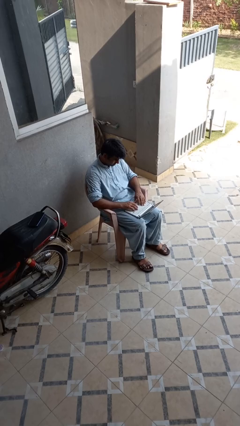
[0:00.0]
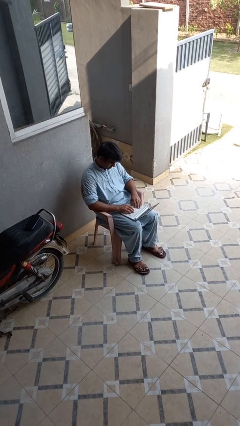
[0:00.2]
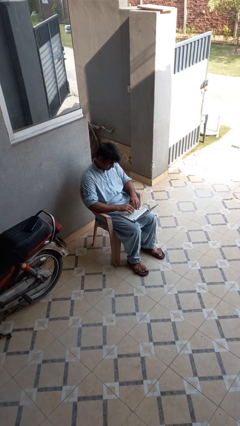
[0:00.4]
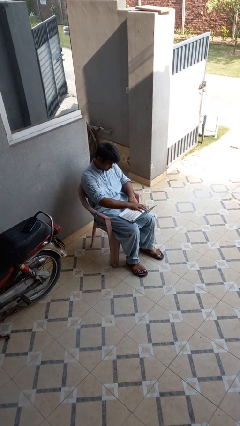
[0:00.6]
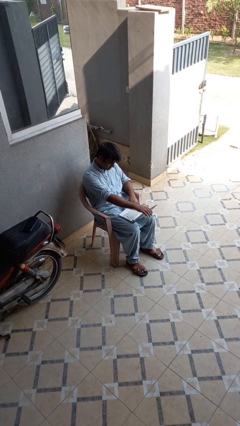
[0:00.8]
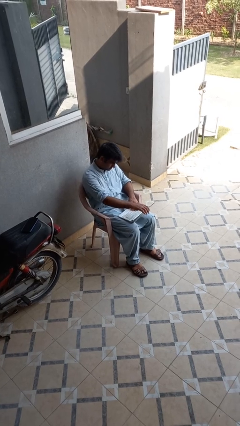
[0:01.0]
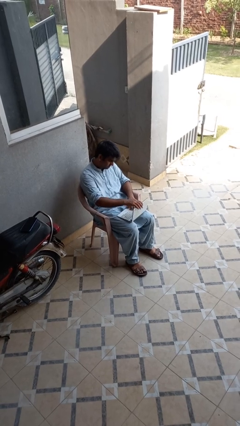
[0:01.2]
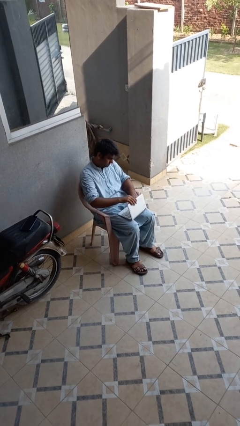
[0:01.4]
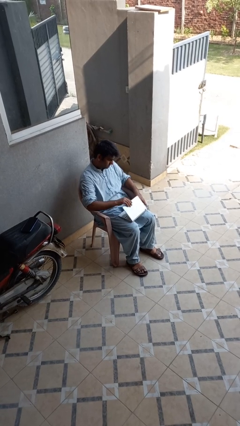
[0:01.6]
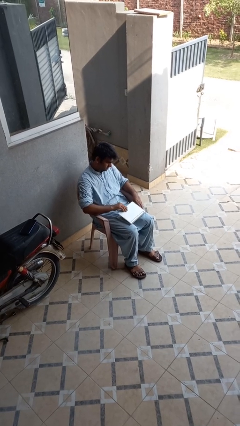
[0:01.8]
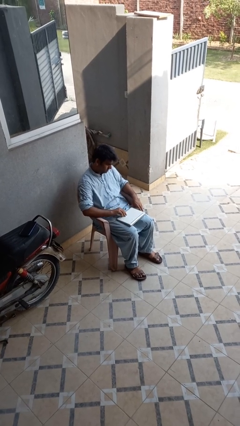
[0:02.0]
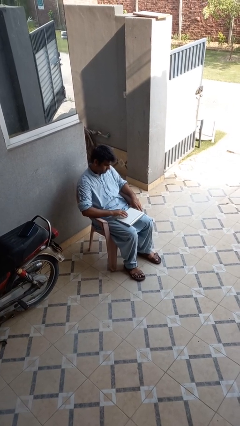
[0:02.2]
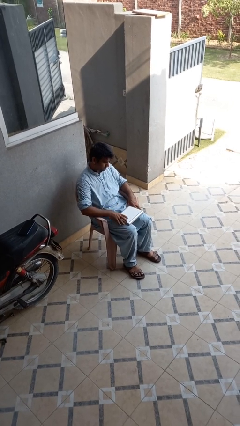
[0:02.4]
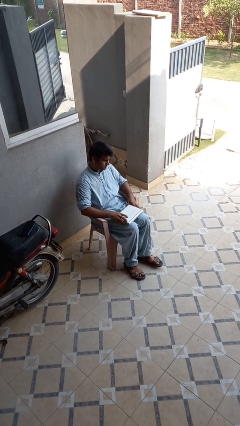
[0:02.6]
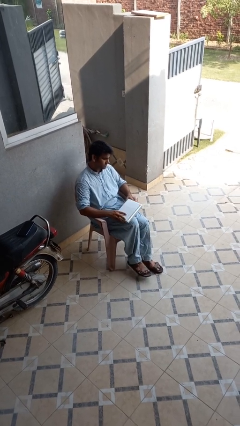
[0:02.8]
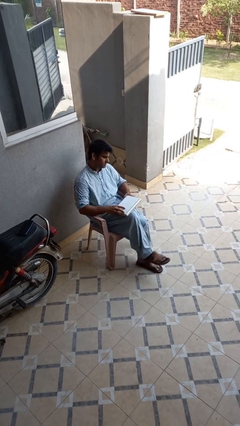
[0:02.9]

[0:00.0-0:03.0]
person closes laptop

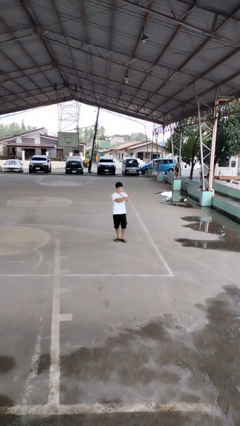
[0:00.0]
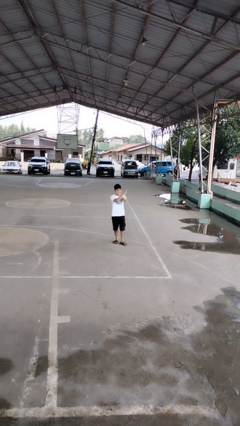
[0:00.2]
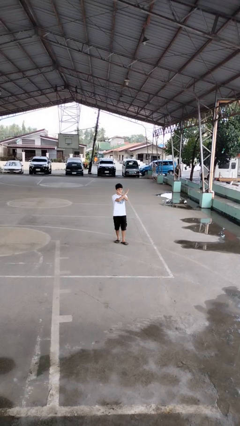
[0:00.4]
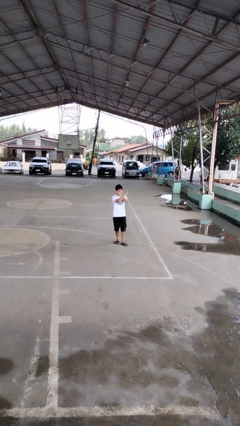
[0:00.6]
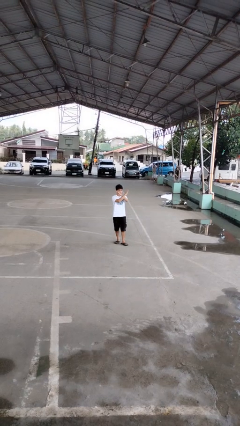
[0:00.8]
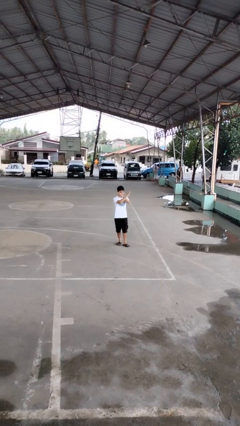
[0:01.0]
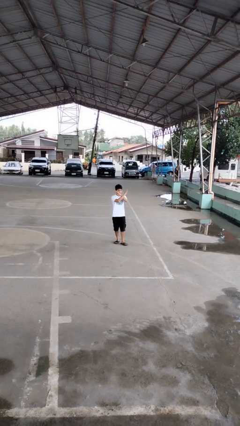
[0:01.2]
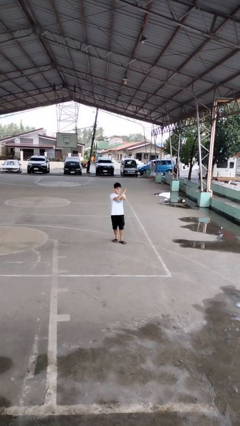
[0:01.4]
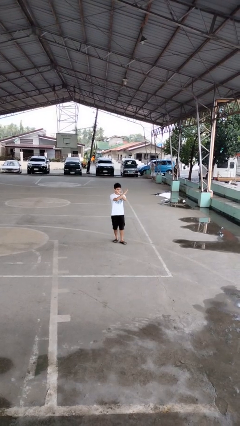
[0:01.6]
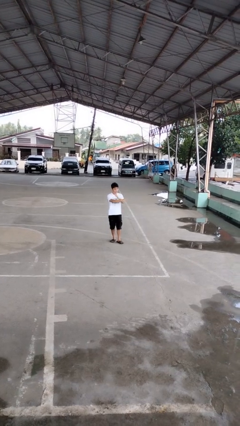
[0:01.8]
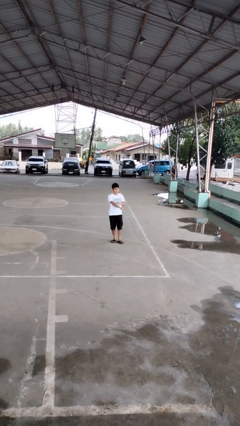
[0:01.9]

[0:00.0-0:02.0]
person gestures arms x

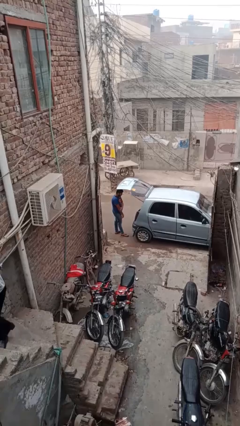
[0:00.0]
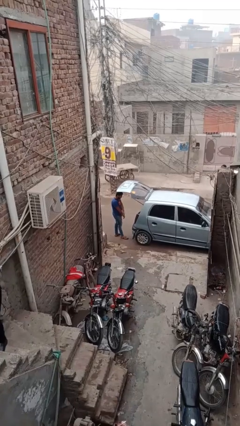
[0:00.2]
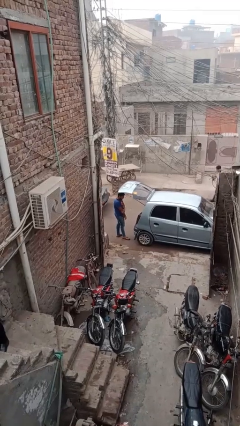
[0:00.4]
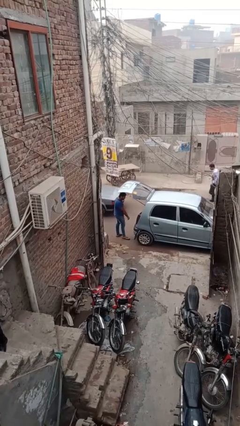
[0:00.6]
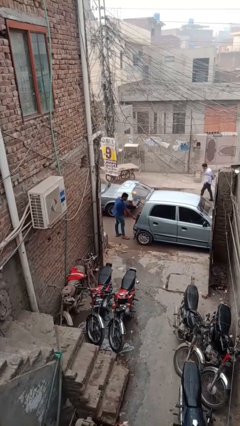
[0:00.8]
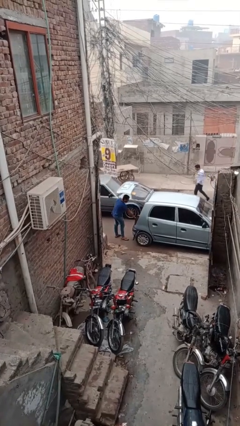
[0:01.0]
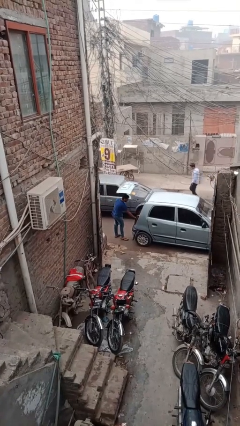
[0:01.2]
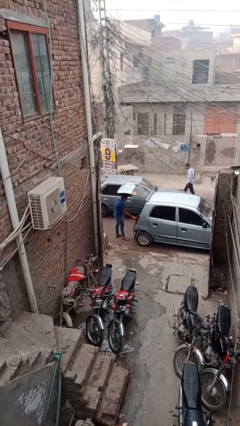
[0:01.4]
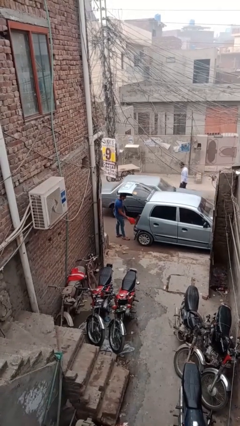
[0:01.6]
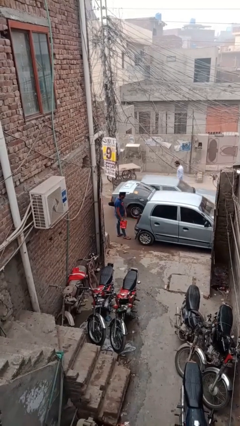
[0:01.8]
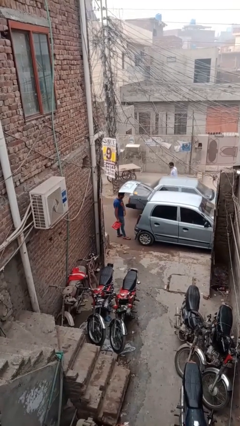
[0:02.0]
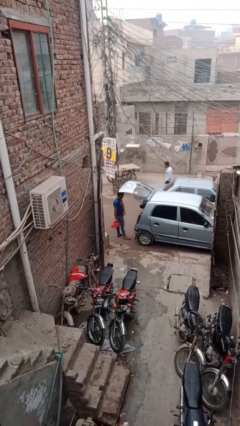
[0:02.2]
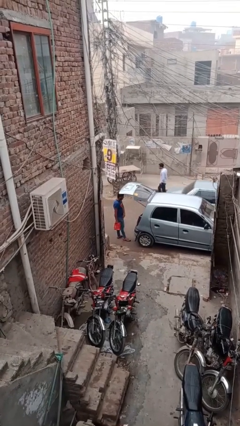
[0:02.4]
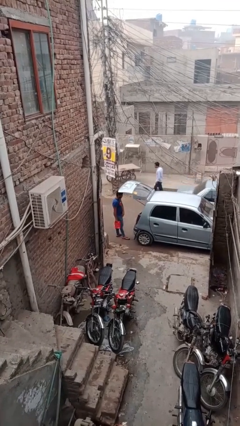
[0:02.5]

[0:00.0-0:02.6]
person unloads car

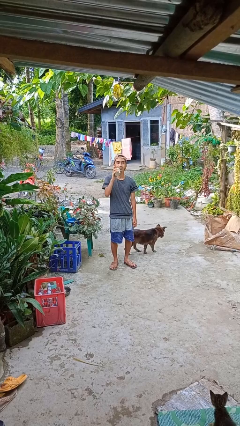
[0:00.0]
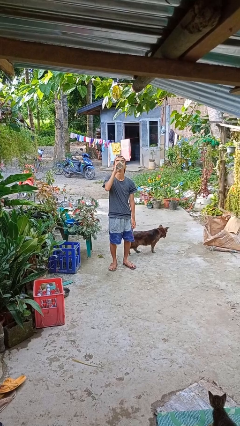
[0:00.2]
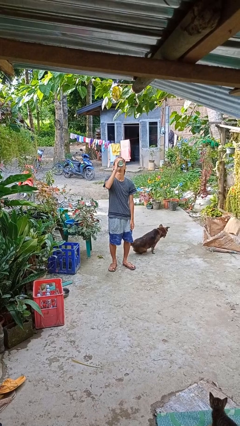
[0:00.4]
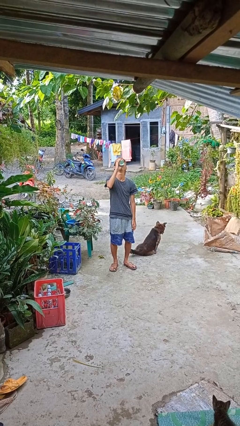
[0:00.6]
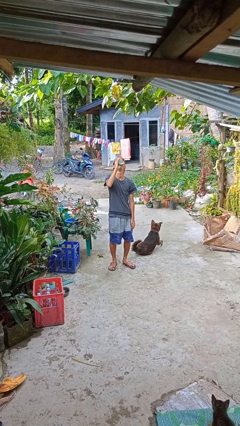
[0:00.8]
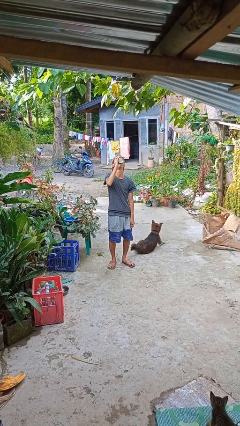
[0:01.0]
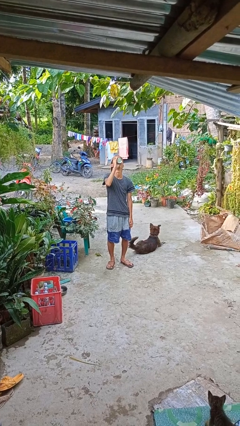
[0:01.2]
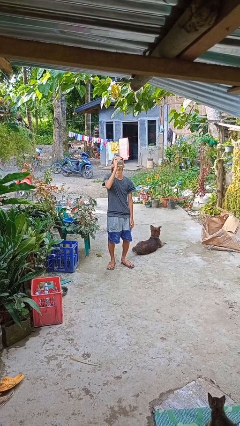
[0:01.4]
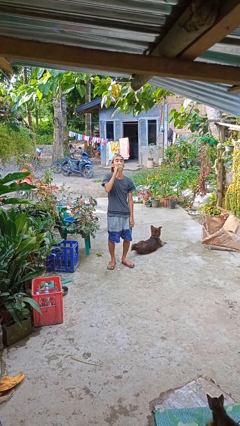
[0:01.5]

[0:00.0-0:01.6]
person drinks from beverage can

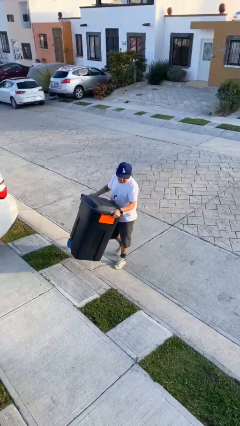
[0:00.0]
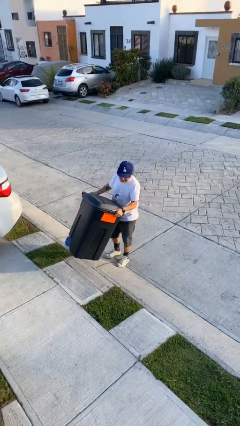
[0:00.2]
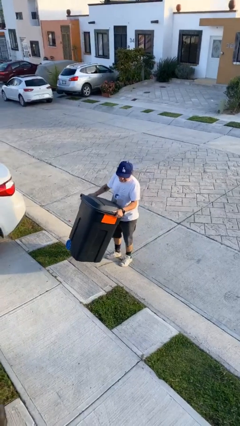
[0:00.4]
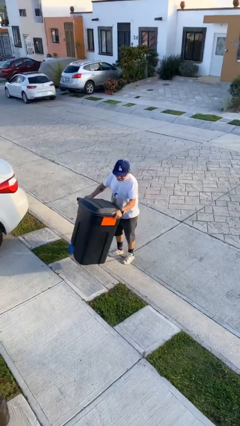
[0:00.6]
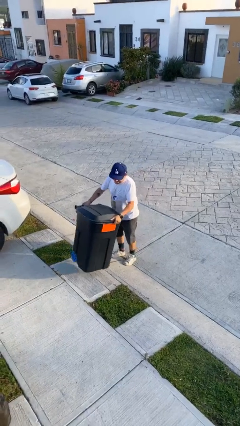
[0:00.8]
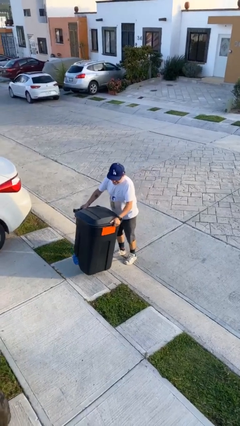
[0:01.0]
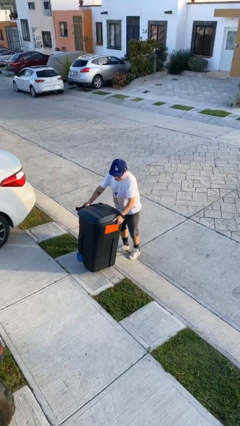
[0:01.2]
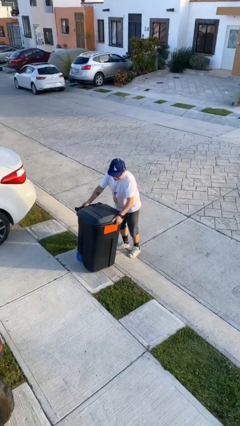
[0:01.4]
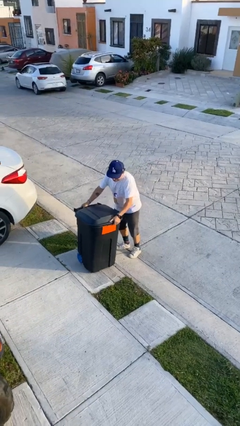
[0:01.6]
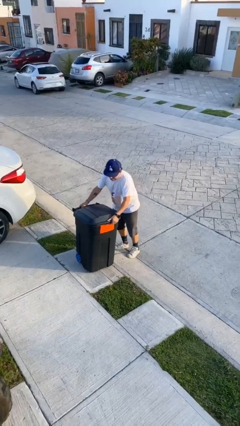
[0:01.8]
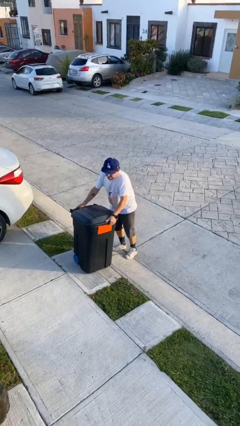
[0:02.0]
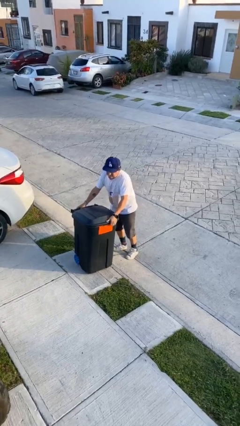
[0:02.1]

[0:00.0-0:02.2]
person puts down object on floor

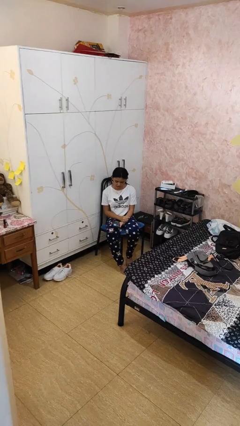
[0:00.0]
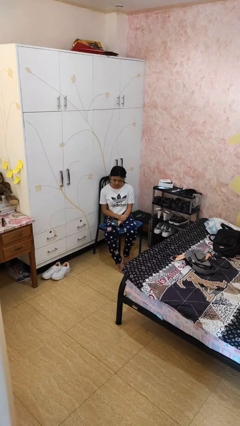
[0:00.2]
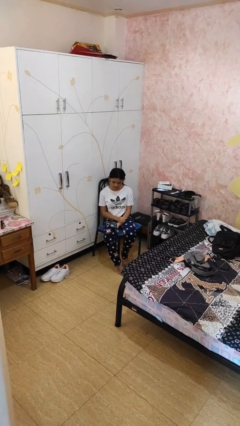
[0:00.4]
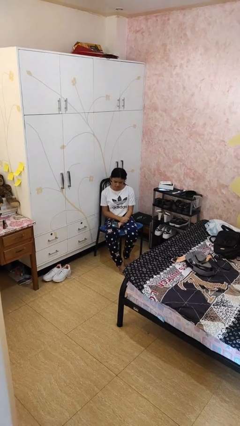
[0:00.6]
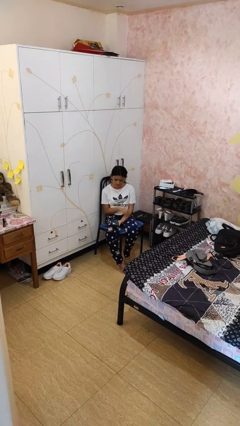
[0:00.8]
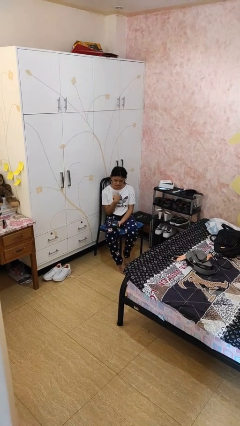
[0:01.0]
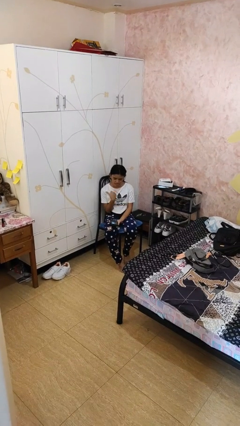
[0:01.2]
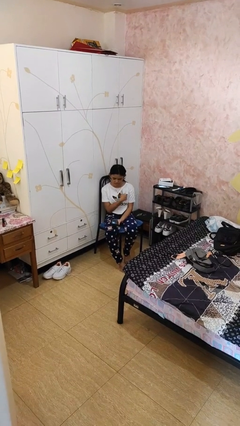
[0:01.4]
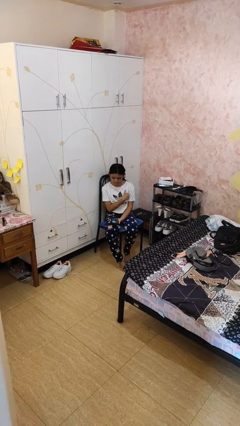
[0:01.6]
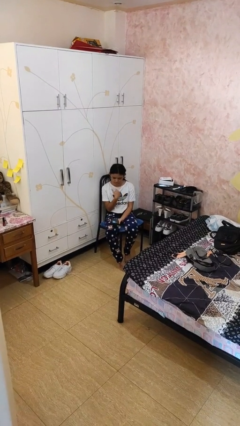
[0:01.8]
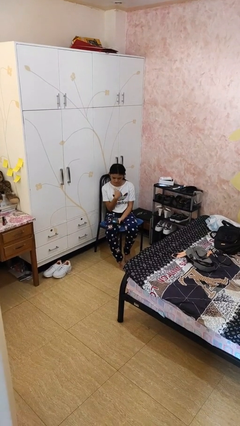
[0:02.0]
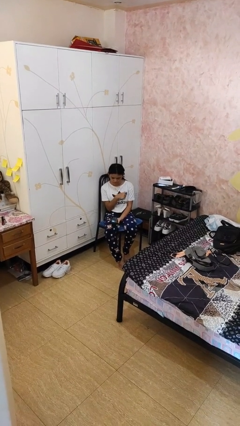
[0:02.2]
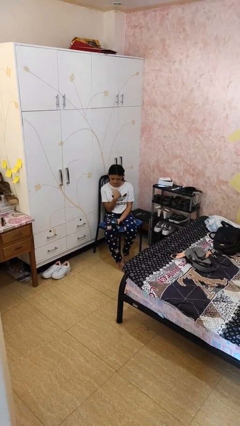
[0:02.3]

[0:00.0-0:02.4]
person gestures cut

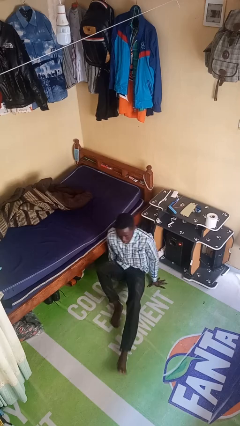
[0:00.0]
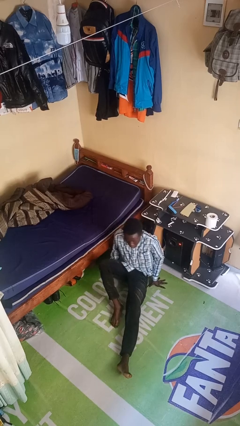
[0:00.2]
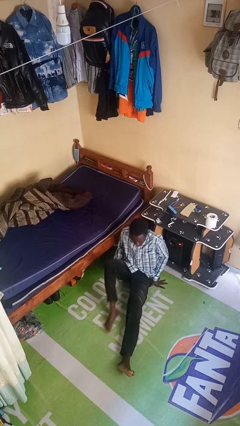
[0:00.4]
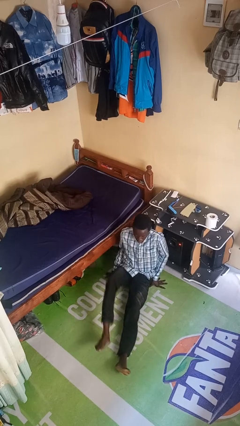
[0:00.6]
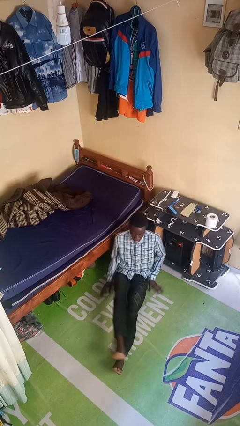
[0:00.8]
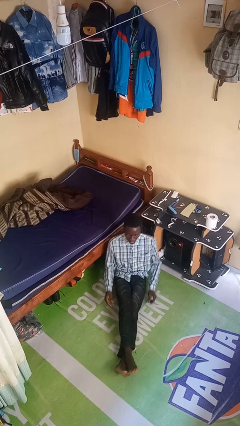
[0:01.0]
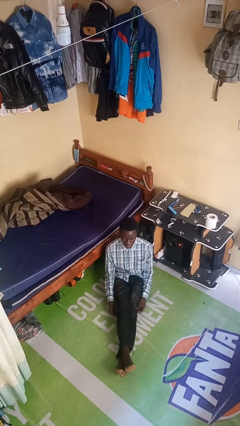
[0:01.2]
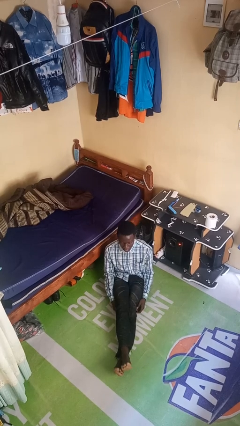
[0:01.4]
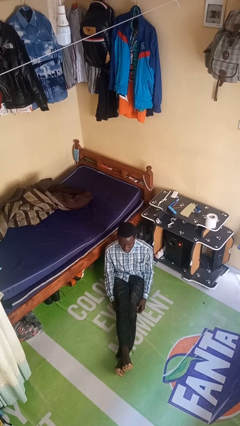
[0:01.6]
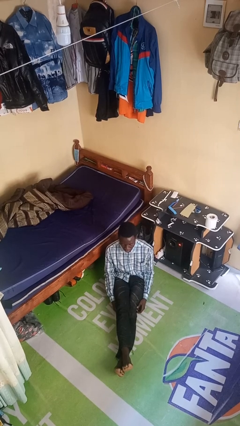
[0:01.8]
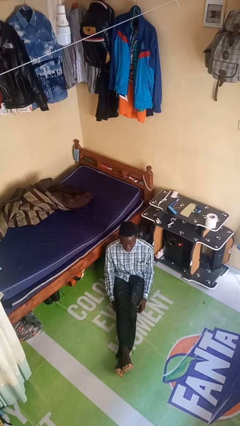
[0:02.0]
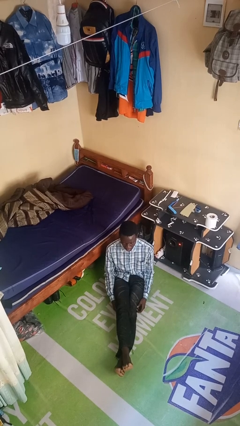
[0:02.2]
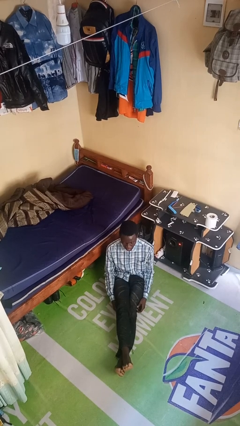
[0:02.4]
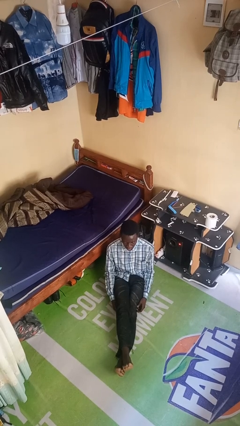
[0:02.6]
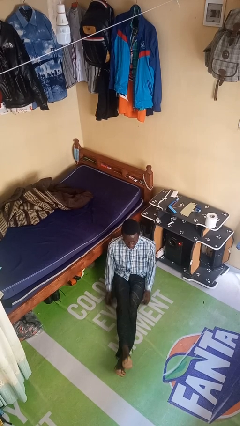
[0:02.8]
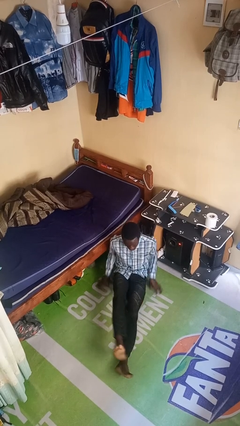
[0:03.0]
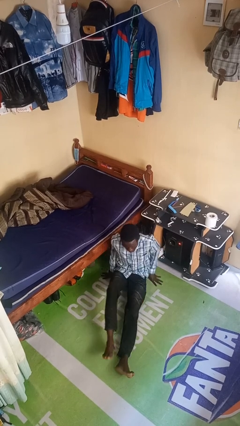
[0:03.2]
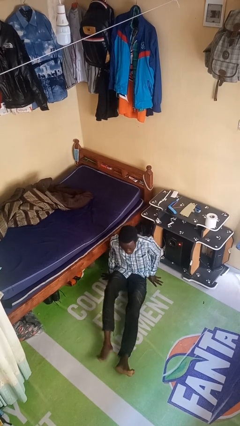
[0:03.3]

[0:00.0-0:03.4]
person sits crisscross
